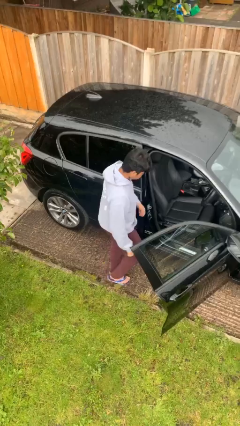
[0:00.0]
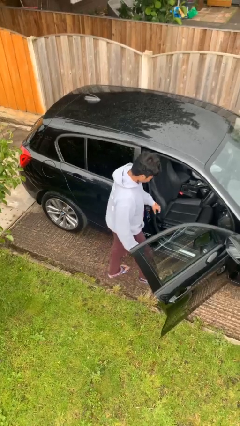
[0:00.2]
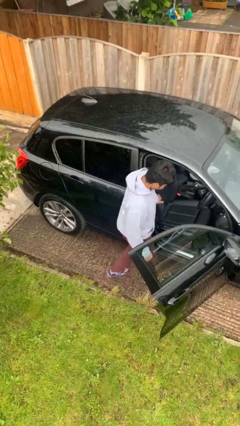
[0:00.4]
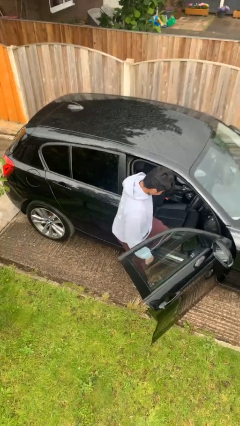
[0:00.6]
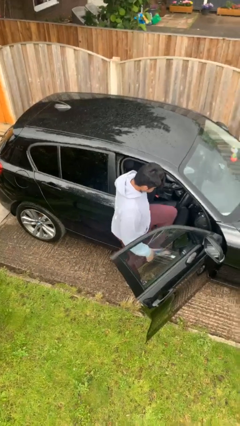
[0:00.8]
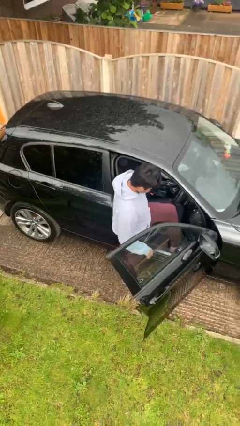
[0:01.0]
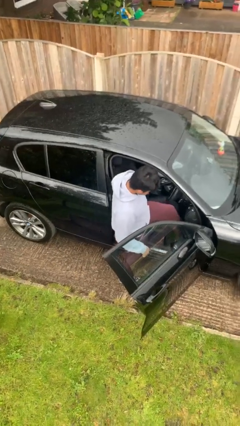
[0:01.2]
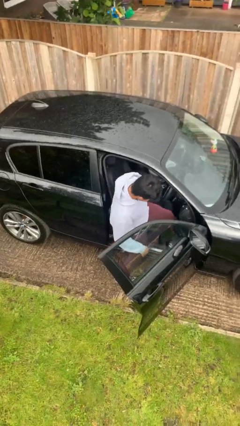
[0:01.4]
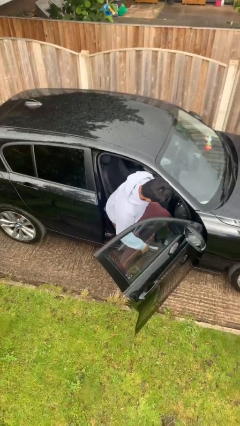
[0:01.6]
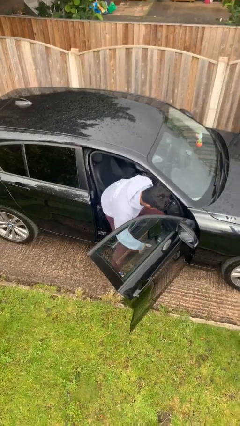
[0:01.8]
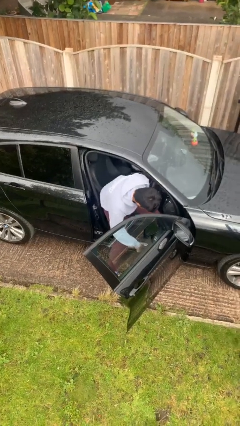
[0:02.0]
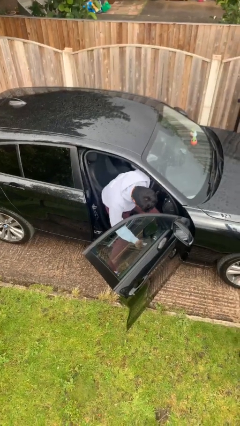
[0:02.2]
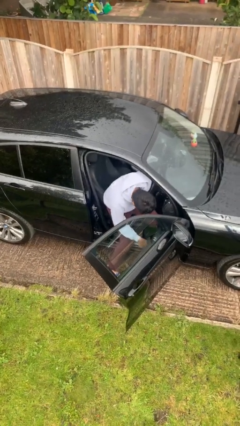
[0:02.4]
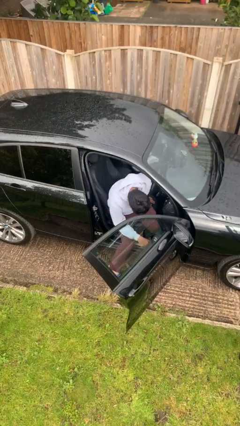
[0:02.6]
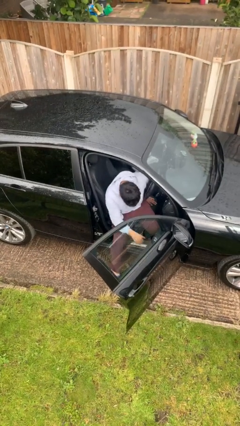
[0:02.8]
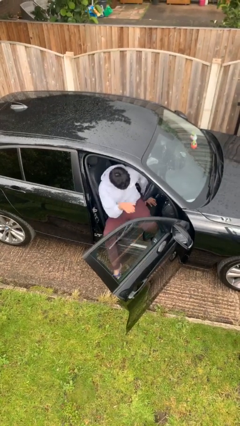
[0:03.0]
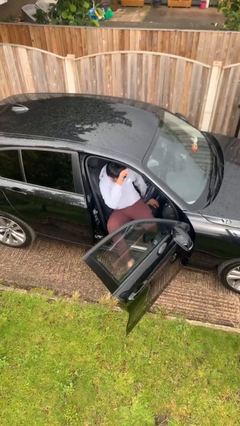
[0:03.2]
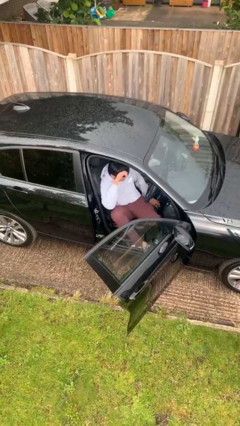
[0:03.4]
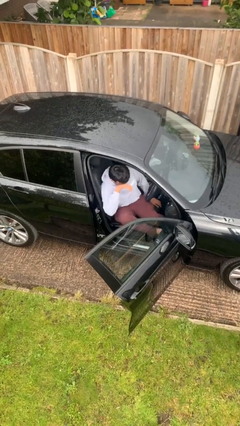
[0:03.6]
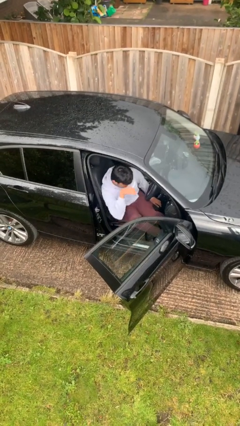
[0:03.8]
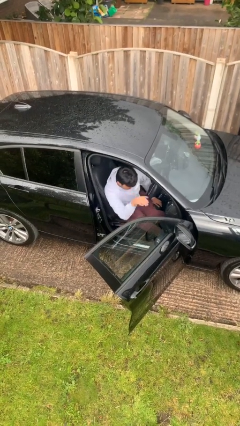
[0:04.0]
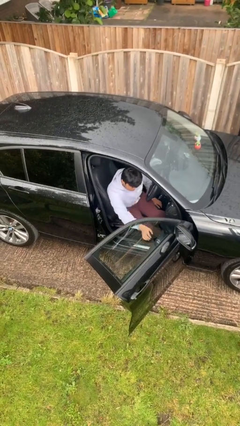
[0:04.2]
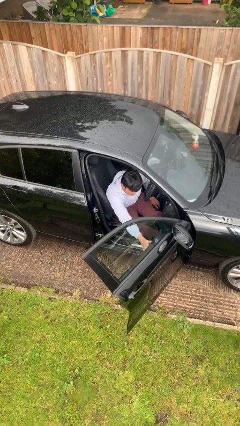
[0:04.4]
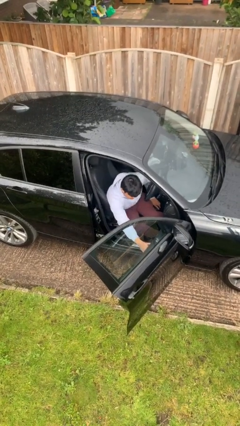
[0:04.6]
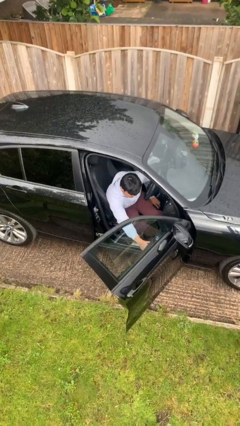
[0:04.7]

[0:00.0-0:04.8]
person enters car

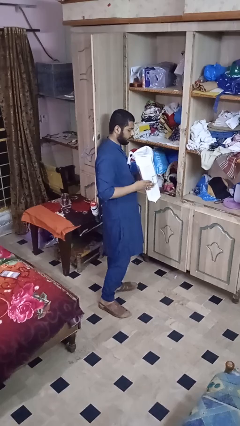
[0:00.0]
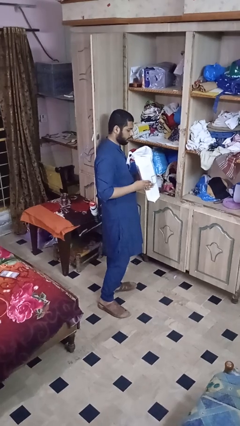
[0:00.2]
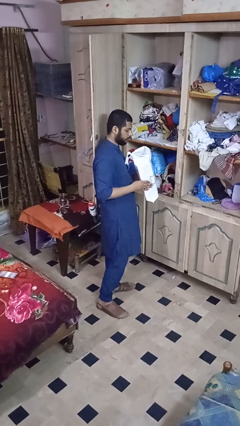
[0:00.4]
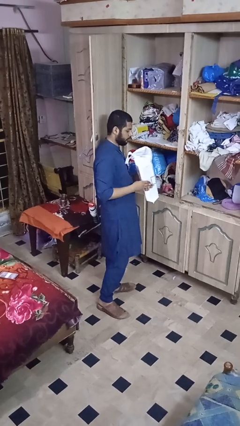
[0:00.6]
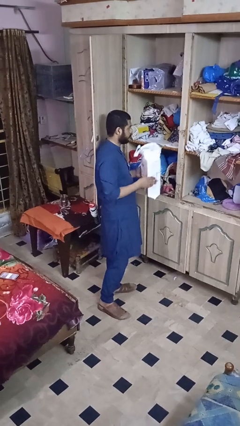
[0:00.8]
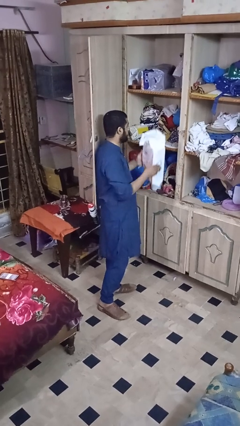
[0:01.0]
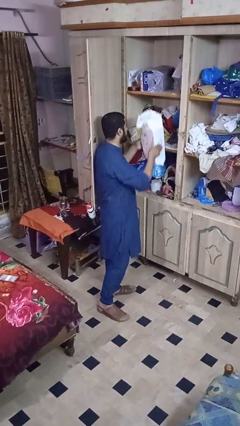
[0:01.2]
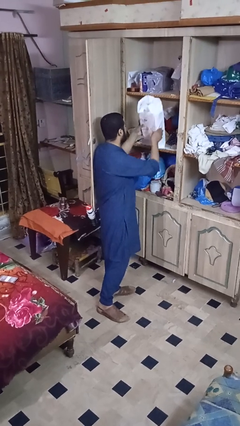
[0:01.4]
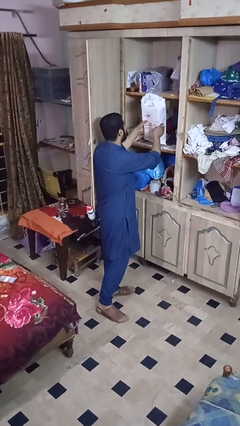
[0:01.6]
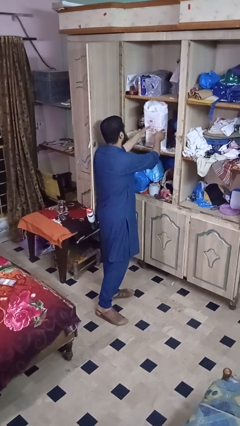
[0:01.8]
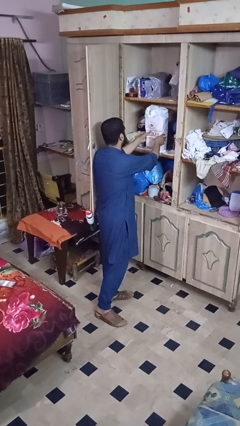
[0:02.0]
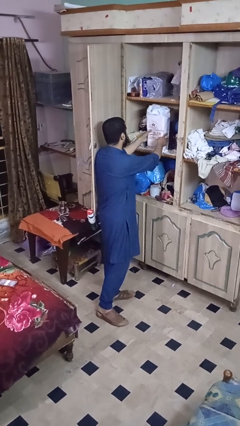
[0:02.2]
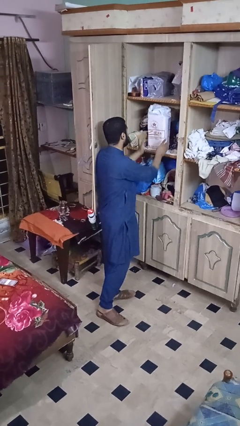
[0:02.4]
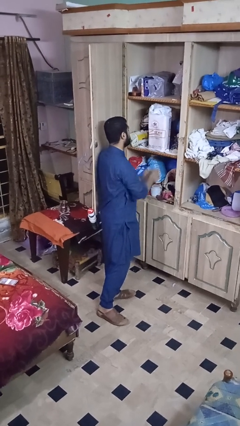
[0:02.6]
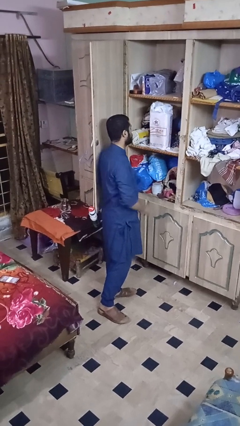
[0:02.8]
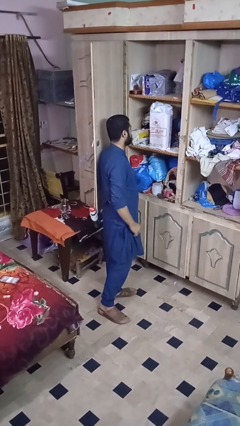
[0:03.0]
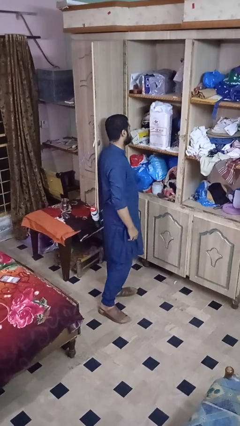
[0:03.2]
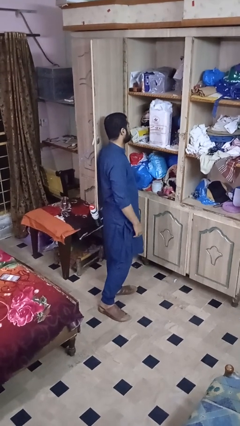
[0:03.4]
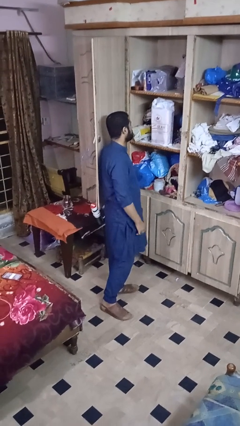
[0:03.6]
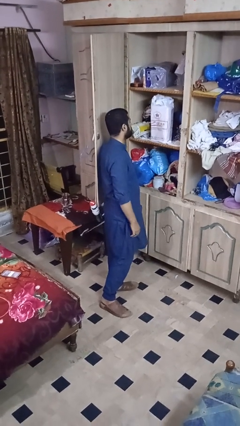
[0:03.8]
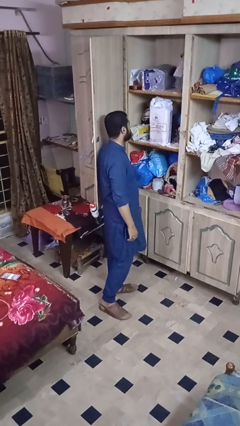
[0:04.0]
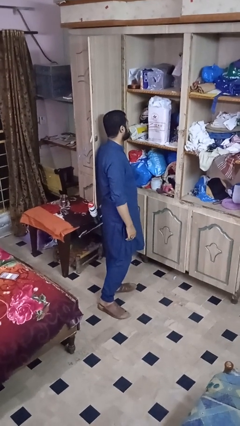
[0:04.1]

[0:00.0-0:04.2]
person puts down object into cabinet

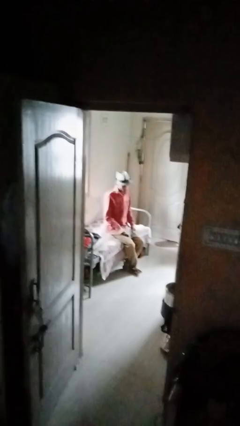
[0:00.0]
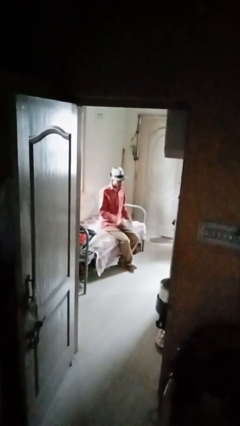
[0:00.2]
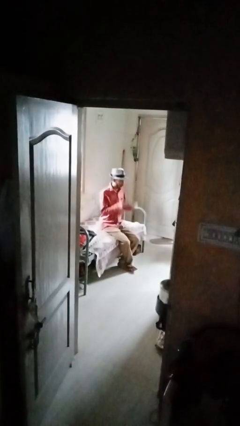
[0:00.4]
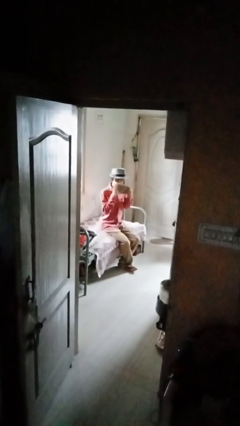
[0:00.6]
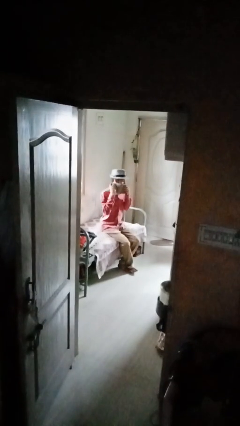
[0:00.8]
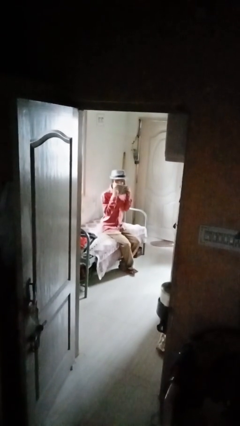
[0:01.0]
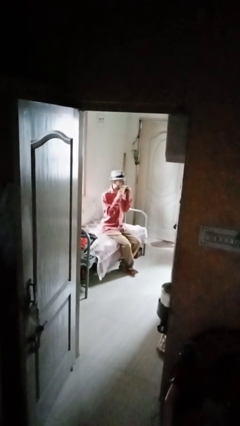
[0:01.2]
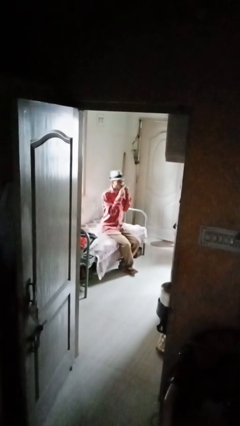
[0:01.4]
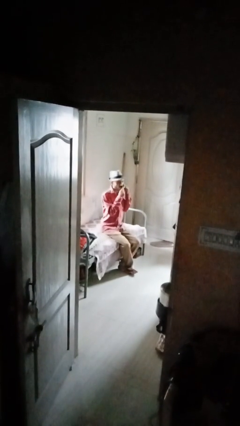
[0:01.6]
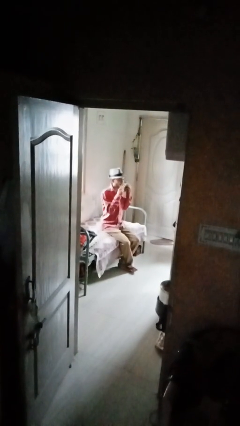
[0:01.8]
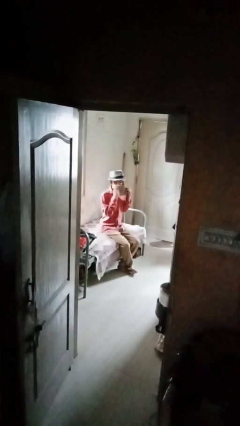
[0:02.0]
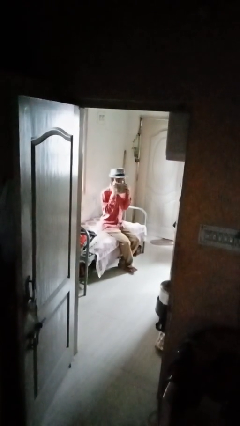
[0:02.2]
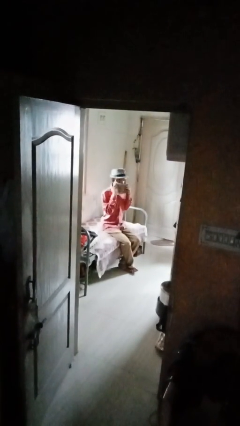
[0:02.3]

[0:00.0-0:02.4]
person wipes mouth with napkin

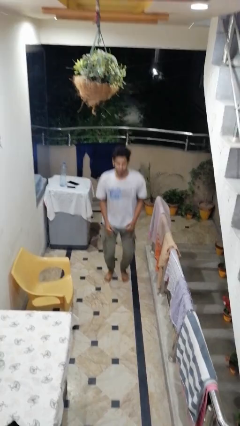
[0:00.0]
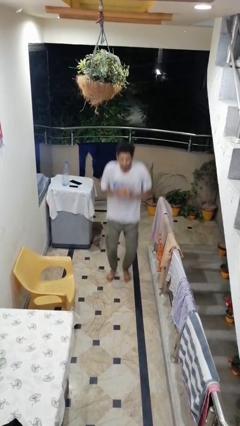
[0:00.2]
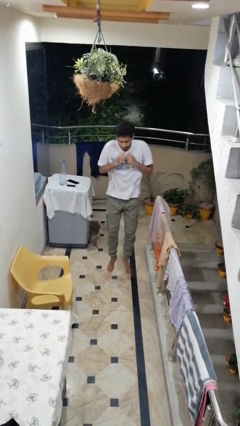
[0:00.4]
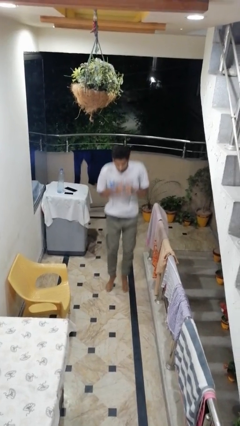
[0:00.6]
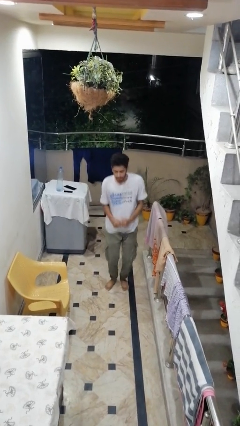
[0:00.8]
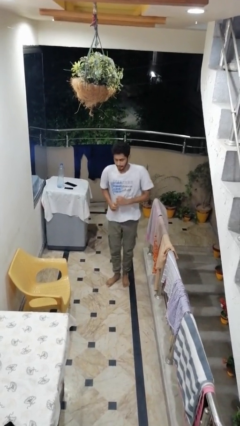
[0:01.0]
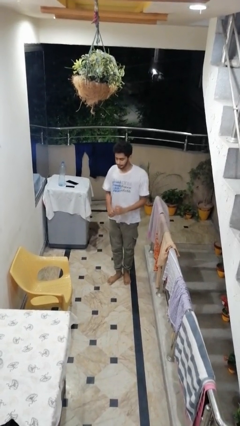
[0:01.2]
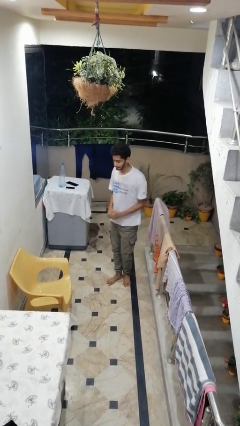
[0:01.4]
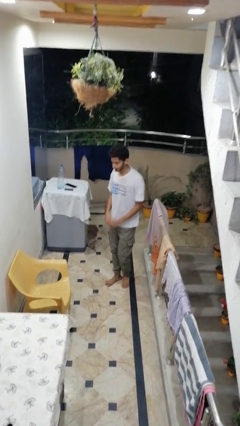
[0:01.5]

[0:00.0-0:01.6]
person jumps

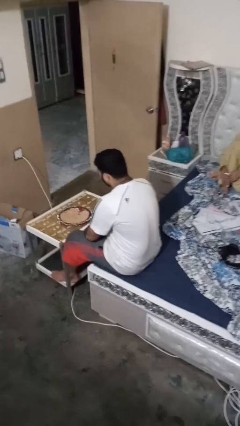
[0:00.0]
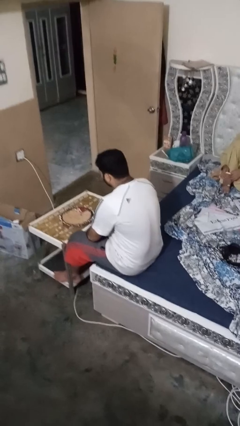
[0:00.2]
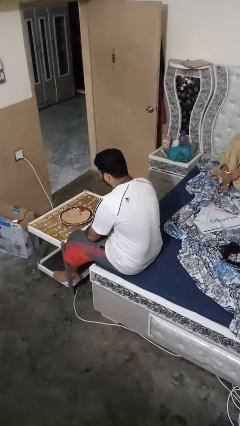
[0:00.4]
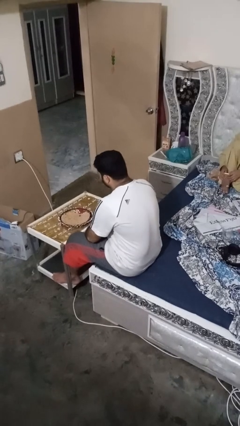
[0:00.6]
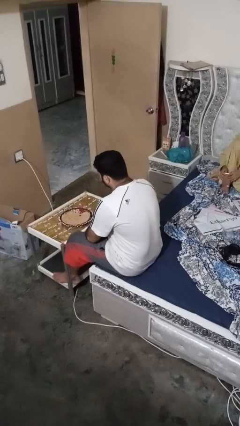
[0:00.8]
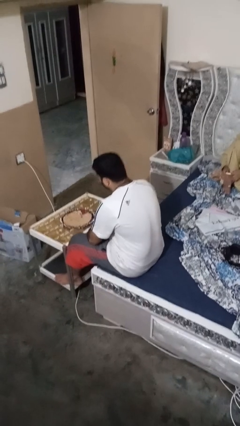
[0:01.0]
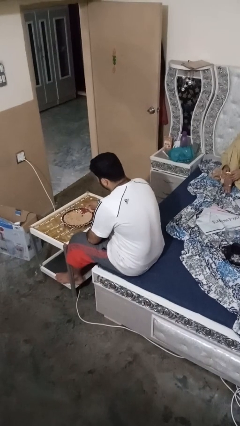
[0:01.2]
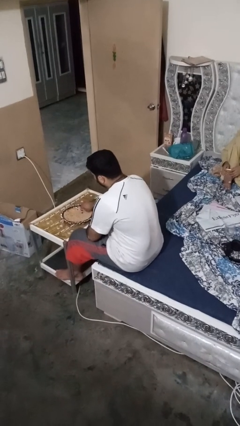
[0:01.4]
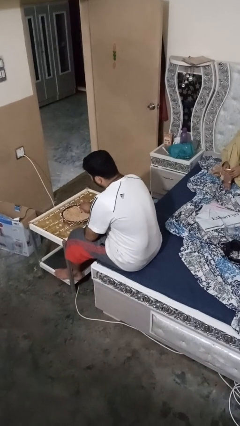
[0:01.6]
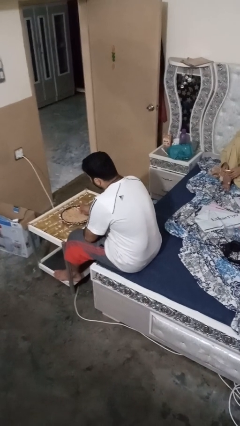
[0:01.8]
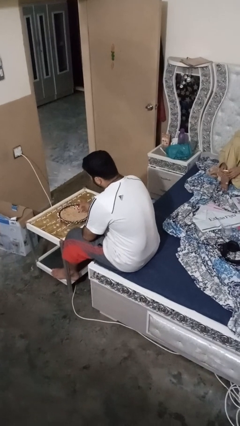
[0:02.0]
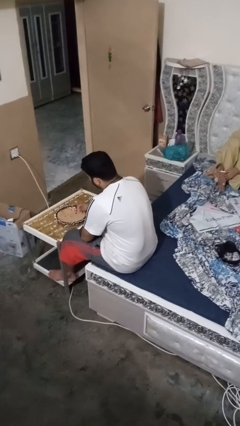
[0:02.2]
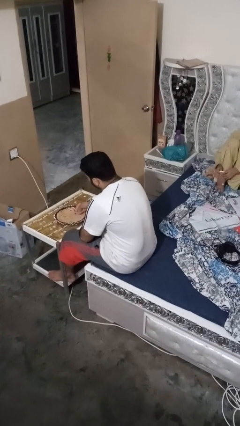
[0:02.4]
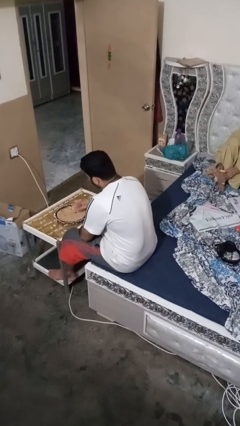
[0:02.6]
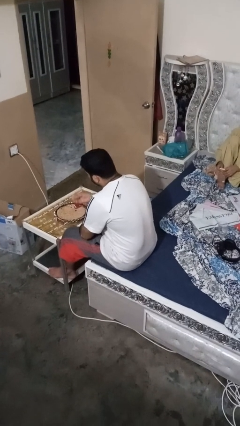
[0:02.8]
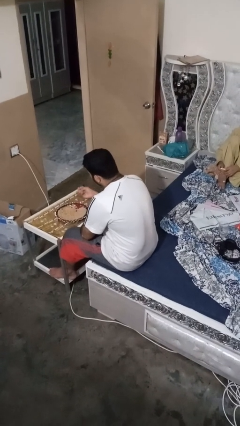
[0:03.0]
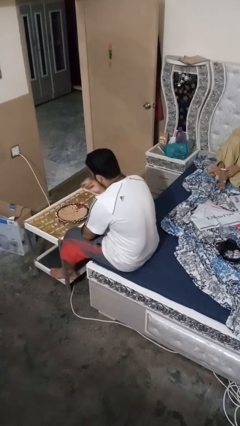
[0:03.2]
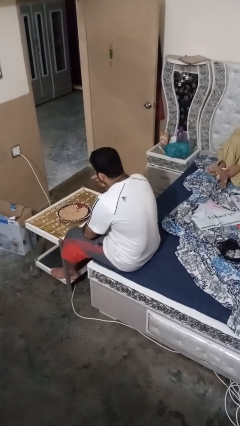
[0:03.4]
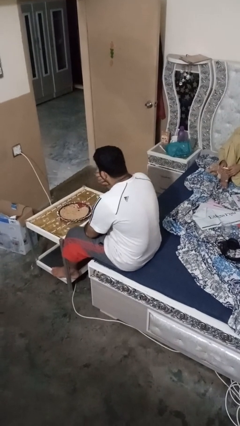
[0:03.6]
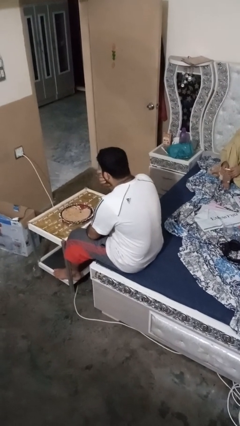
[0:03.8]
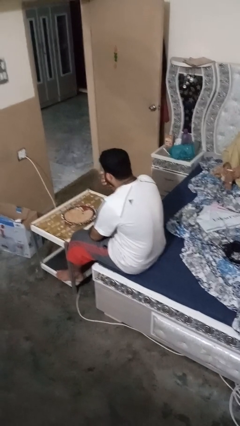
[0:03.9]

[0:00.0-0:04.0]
person eats with hands

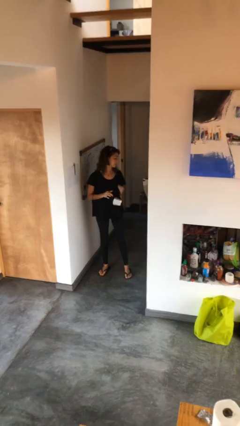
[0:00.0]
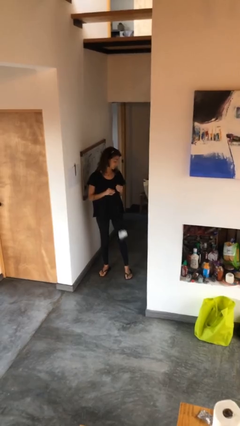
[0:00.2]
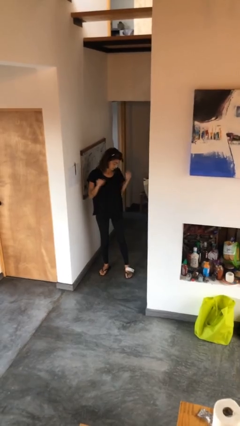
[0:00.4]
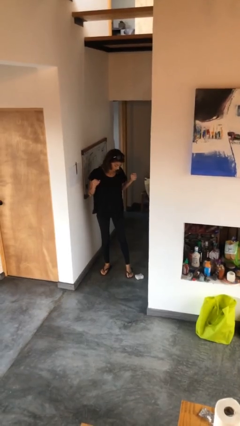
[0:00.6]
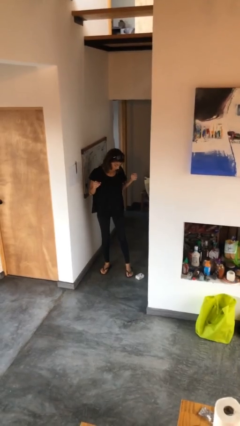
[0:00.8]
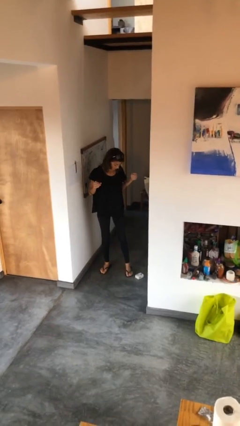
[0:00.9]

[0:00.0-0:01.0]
person drops object
